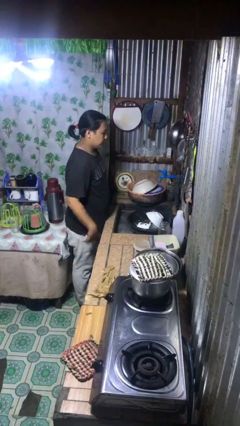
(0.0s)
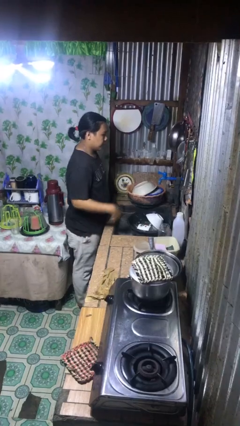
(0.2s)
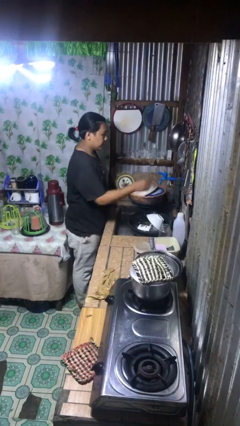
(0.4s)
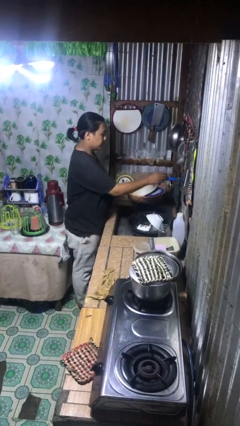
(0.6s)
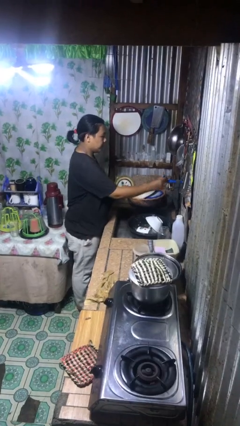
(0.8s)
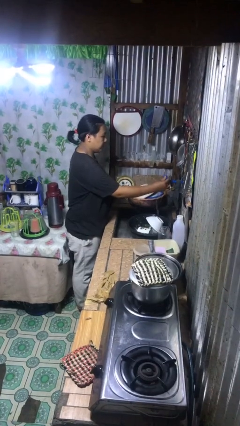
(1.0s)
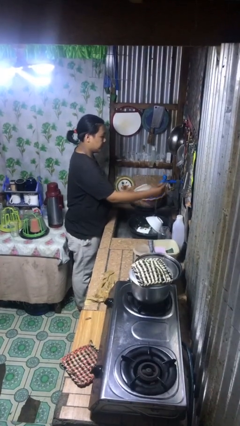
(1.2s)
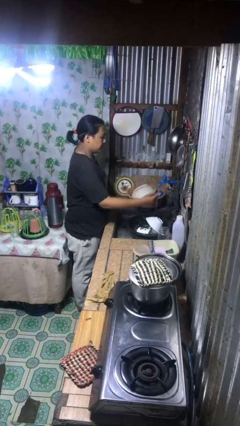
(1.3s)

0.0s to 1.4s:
person turns on faucet

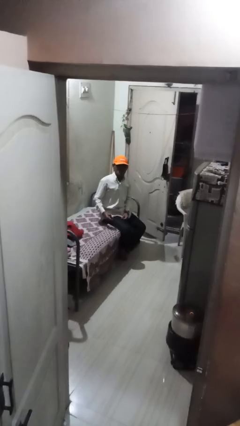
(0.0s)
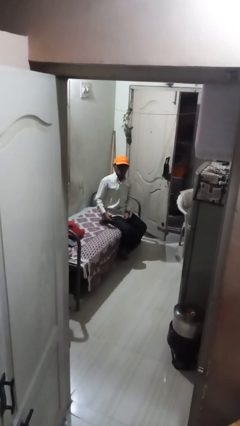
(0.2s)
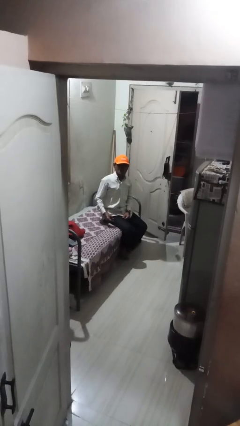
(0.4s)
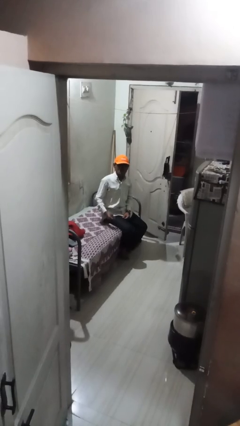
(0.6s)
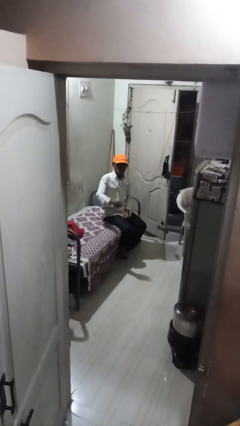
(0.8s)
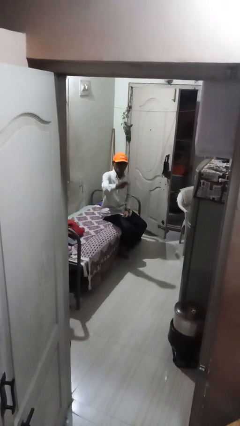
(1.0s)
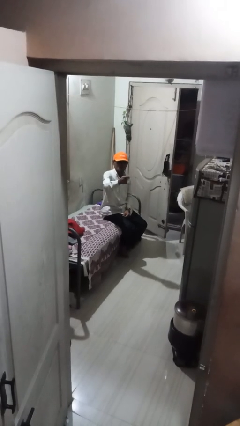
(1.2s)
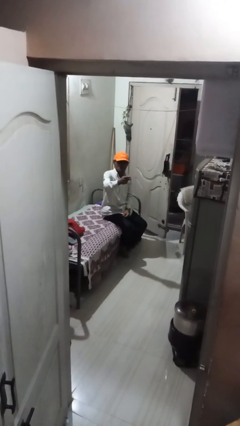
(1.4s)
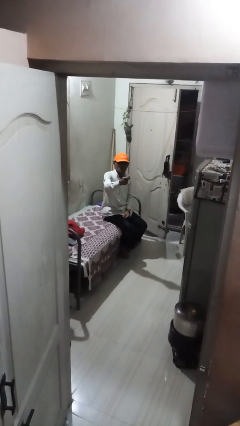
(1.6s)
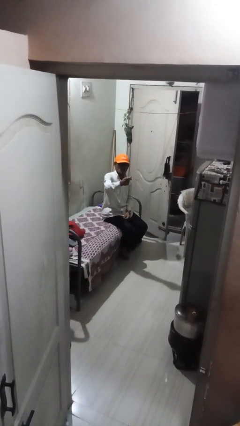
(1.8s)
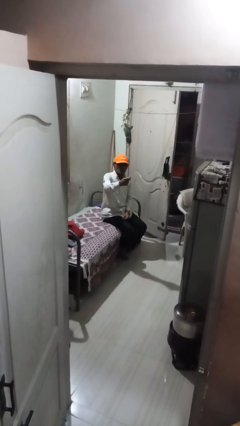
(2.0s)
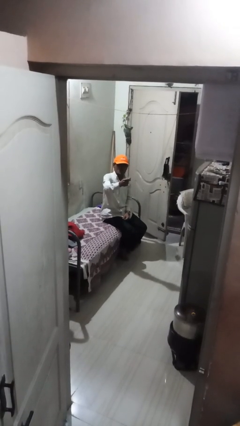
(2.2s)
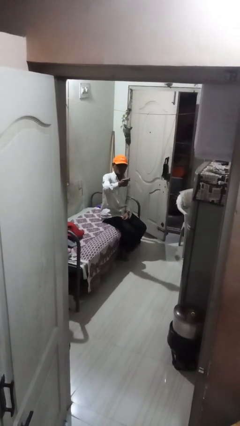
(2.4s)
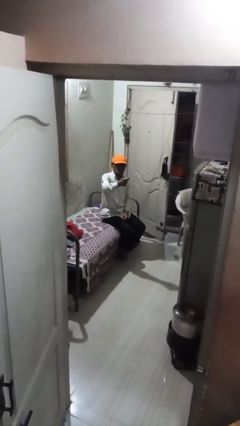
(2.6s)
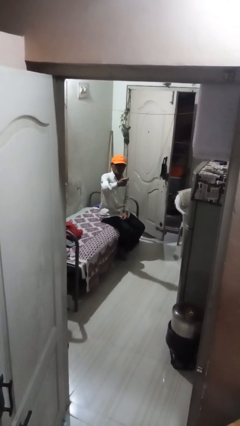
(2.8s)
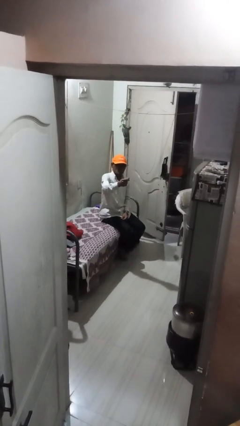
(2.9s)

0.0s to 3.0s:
person snaps fingers

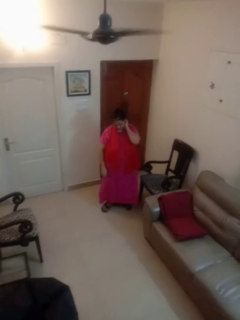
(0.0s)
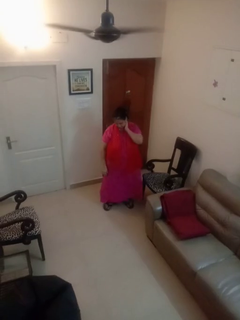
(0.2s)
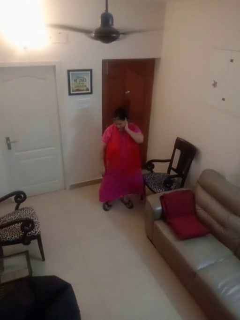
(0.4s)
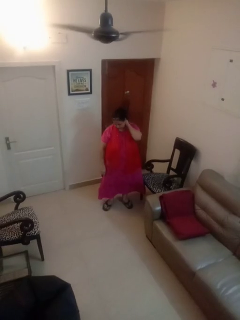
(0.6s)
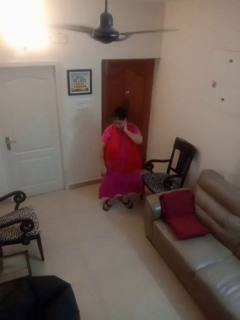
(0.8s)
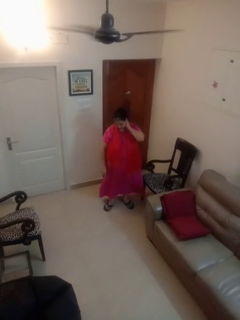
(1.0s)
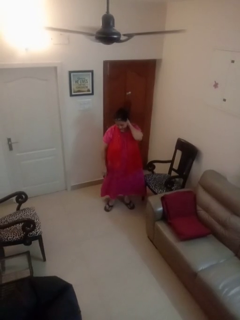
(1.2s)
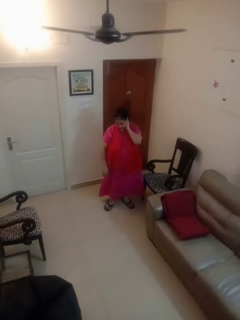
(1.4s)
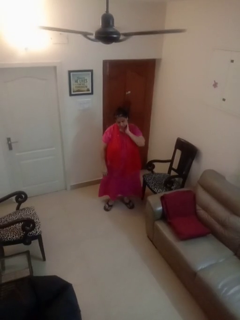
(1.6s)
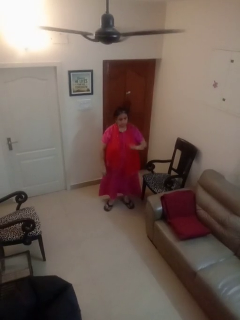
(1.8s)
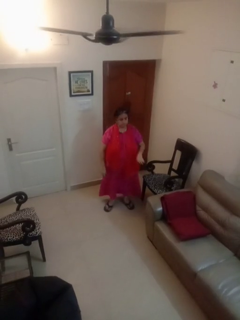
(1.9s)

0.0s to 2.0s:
person rubs neck

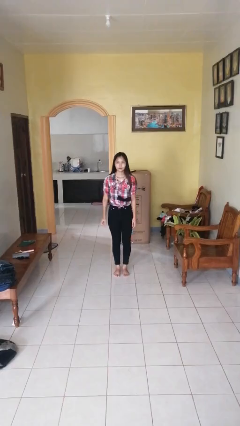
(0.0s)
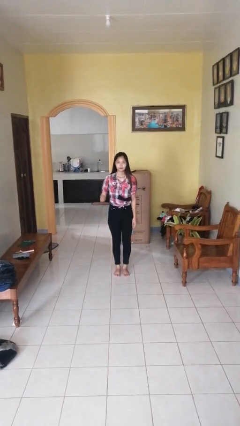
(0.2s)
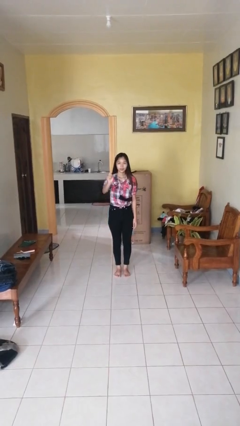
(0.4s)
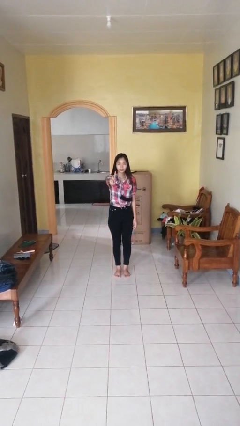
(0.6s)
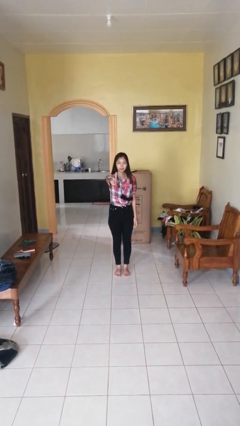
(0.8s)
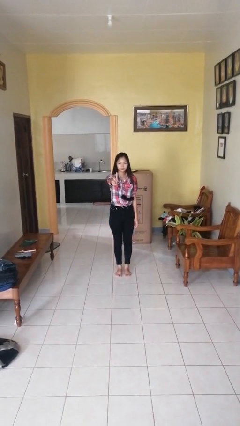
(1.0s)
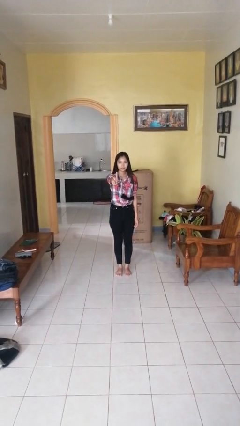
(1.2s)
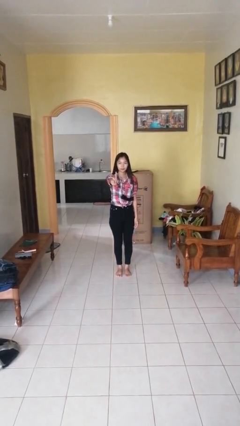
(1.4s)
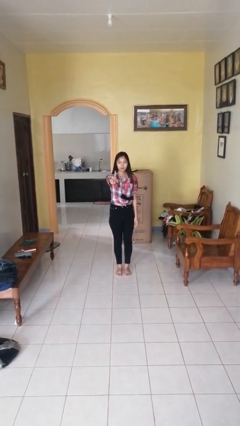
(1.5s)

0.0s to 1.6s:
person gestures number one

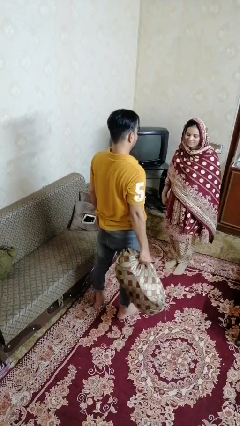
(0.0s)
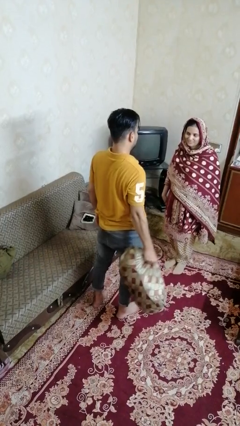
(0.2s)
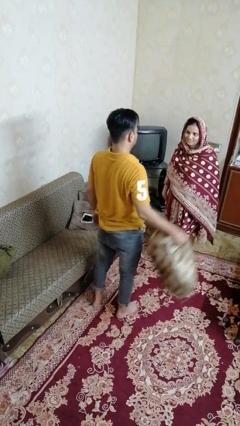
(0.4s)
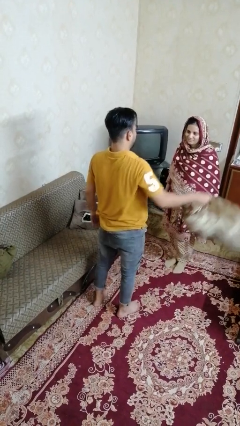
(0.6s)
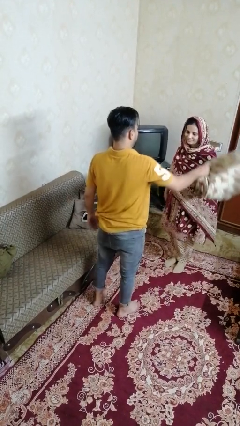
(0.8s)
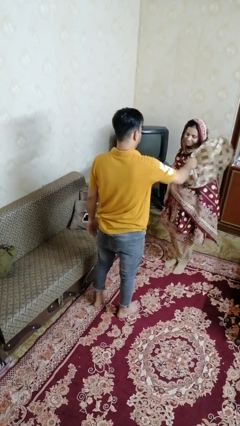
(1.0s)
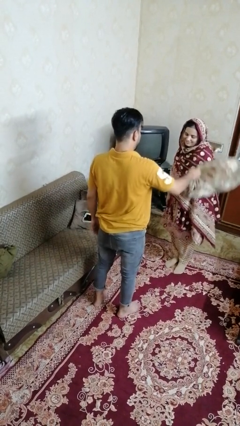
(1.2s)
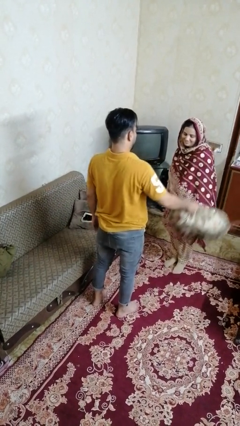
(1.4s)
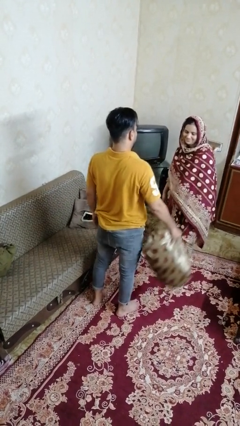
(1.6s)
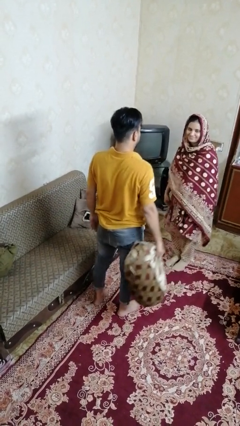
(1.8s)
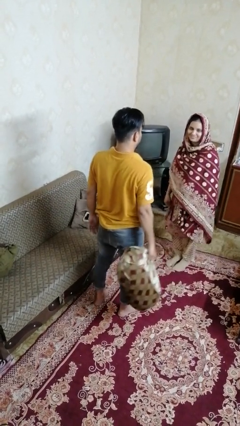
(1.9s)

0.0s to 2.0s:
person hits person with pillow

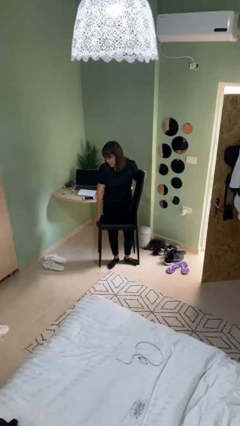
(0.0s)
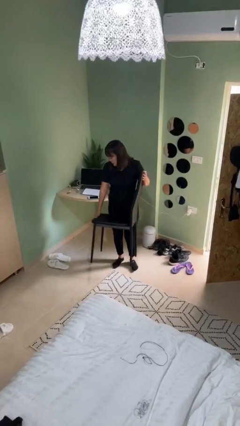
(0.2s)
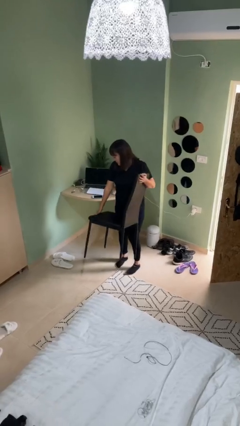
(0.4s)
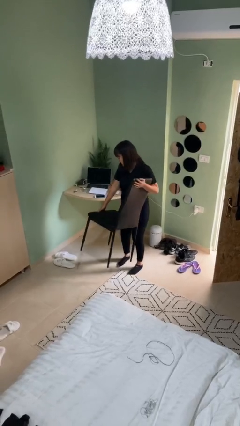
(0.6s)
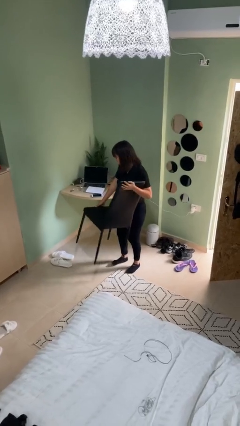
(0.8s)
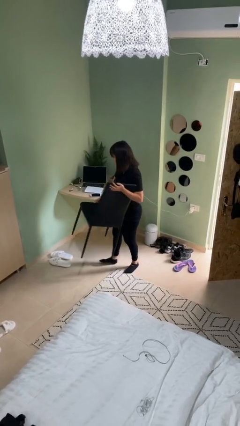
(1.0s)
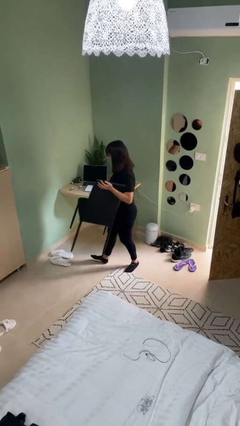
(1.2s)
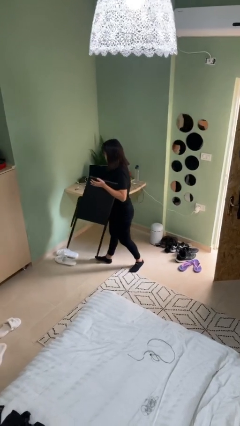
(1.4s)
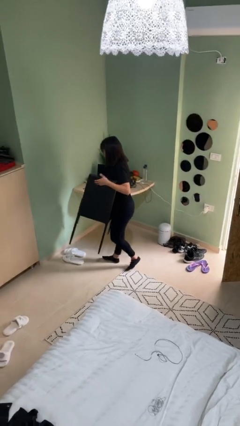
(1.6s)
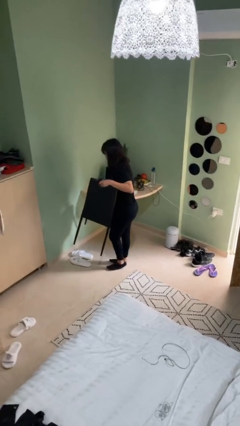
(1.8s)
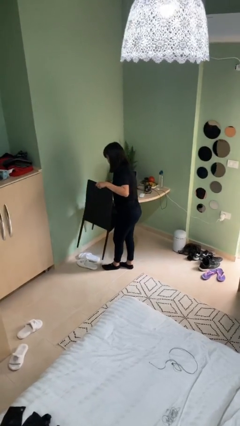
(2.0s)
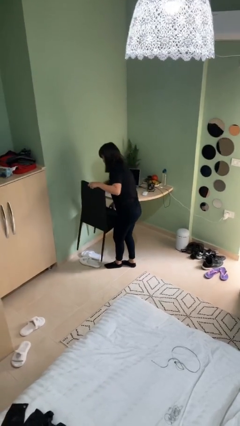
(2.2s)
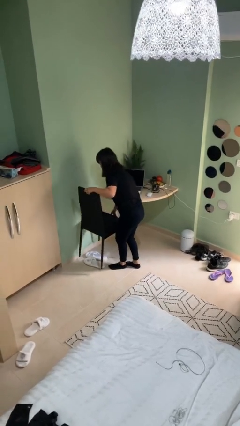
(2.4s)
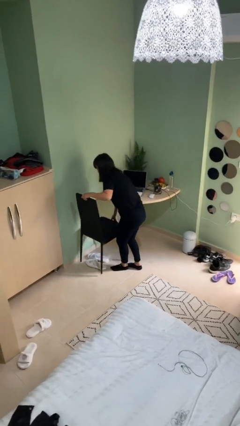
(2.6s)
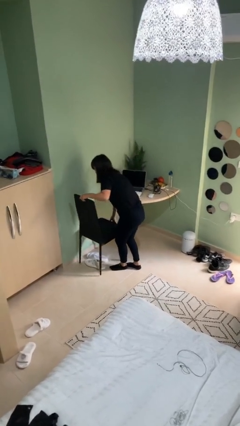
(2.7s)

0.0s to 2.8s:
person carries heavy object

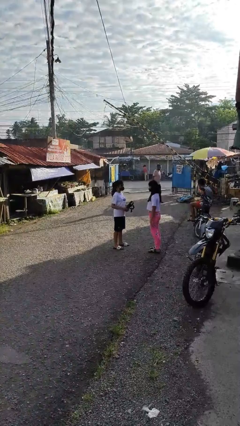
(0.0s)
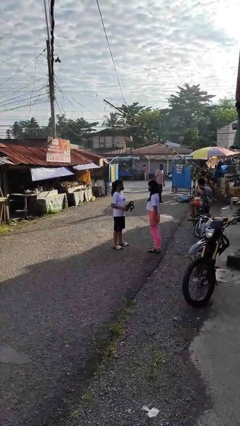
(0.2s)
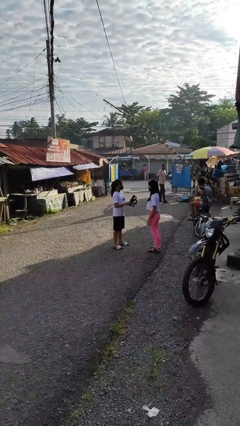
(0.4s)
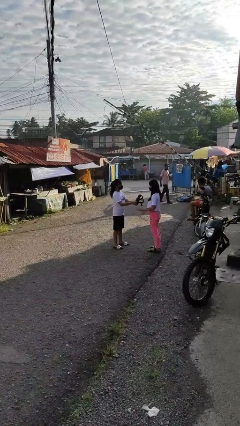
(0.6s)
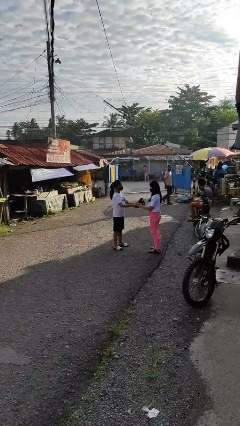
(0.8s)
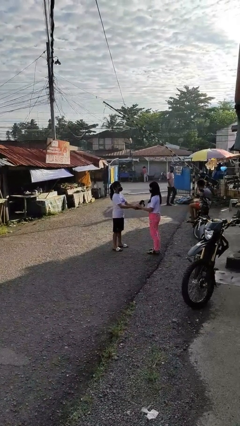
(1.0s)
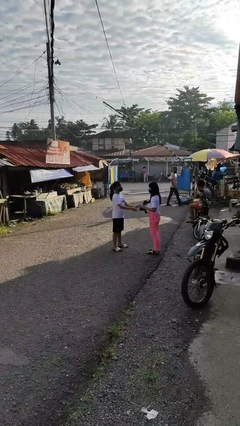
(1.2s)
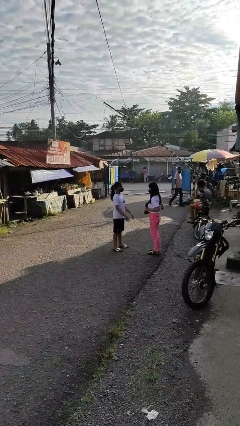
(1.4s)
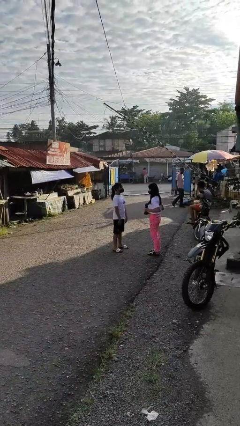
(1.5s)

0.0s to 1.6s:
person transfers object to person

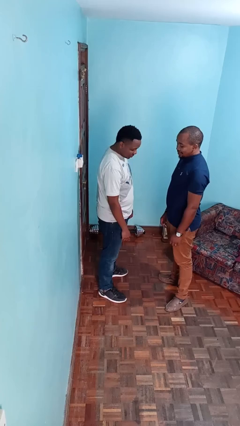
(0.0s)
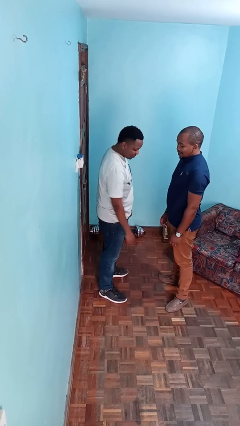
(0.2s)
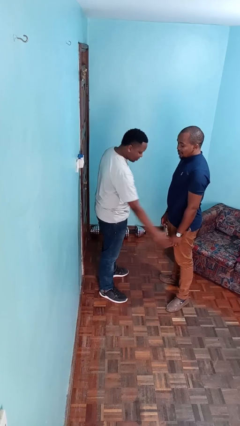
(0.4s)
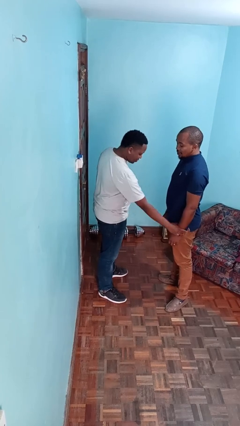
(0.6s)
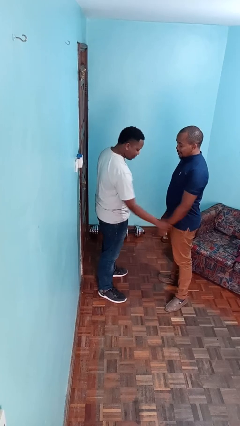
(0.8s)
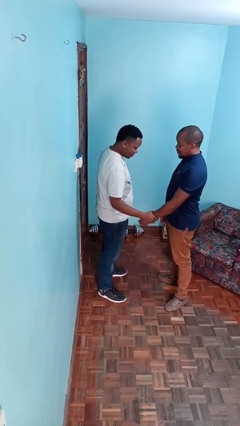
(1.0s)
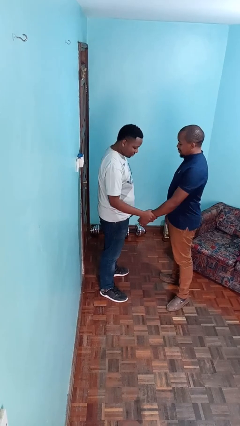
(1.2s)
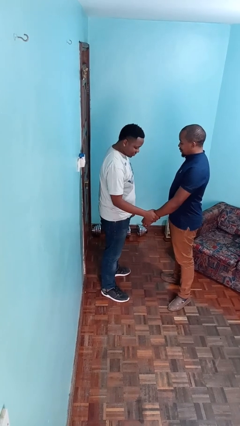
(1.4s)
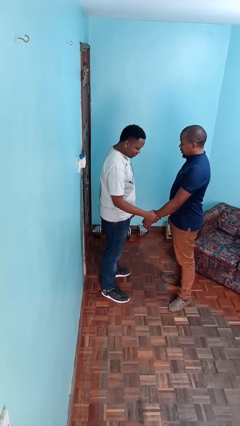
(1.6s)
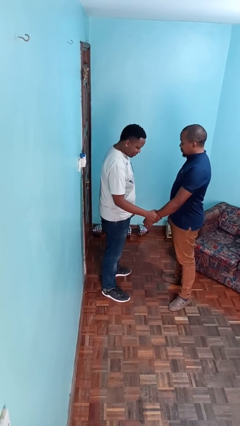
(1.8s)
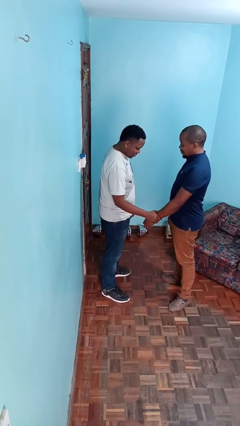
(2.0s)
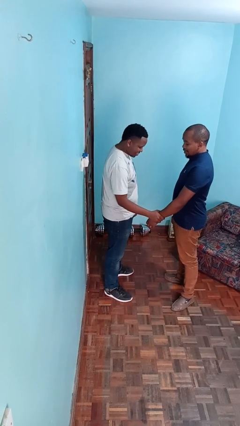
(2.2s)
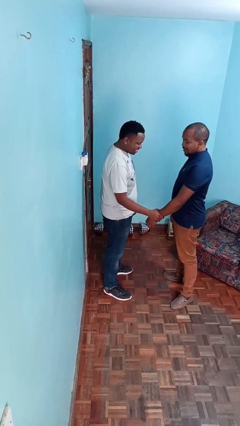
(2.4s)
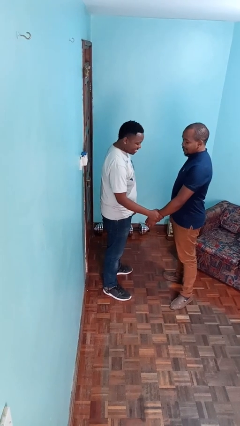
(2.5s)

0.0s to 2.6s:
person grabs person by forearm

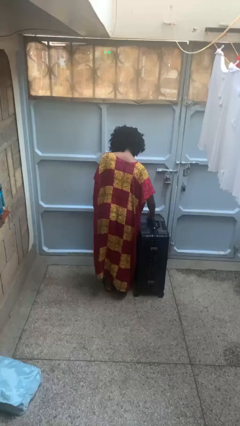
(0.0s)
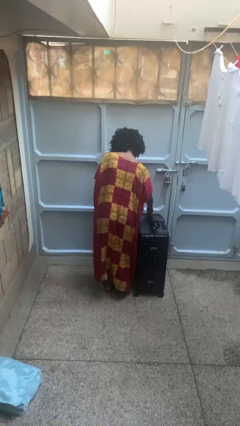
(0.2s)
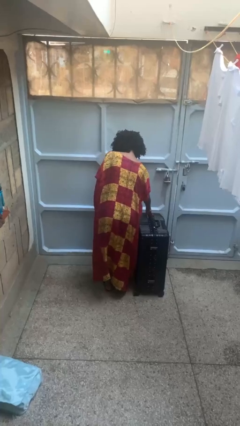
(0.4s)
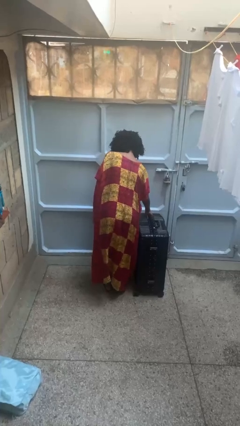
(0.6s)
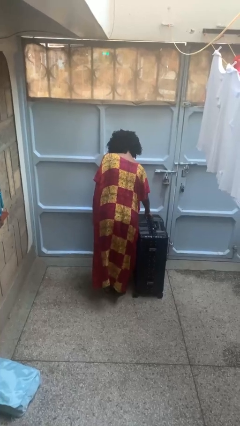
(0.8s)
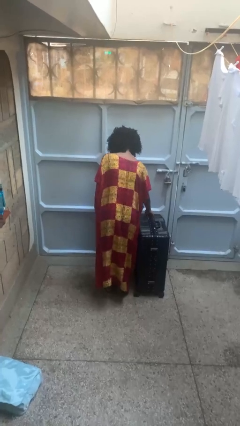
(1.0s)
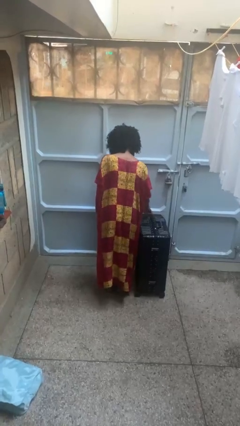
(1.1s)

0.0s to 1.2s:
person closes suitcase
